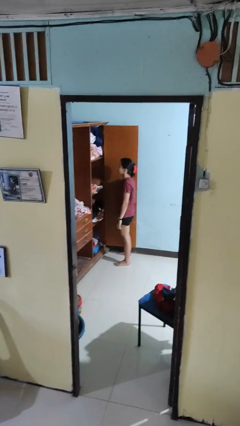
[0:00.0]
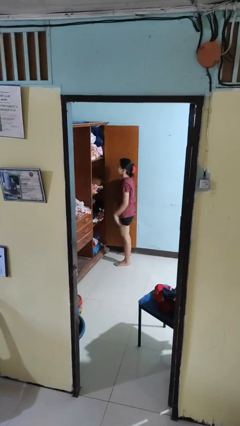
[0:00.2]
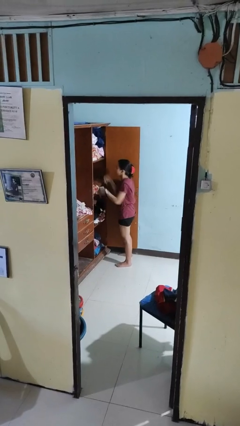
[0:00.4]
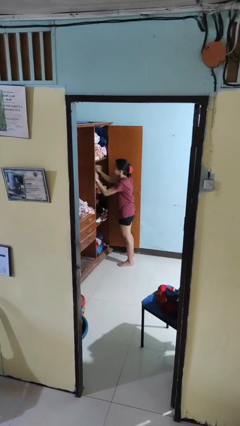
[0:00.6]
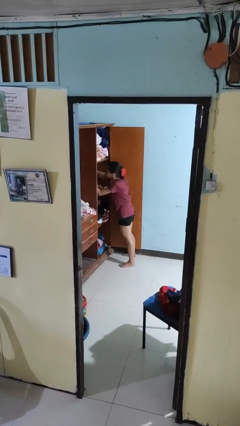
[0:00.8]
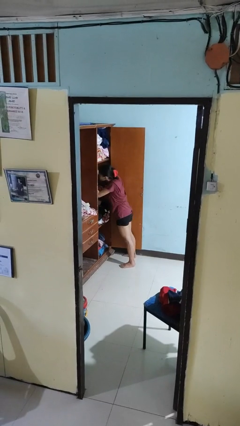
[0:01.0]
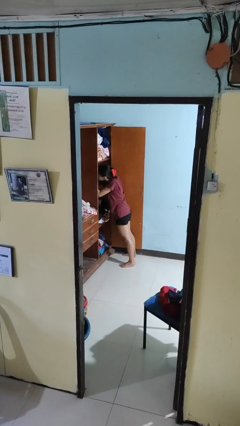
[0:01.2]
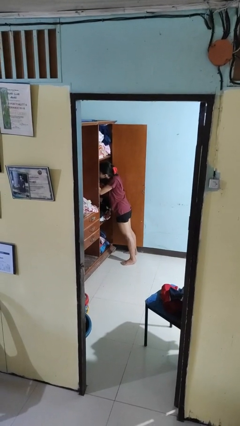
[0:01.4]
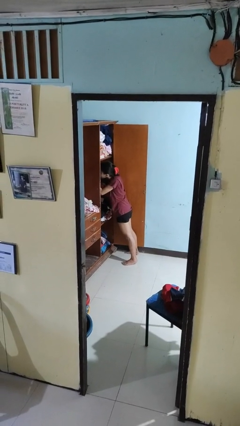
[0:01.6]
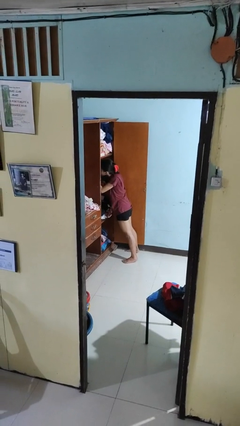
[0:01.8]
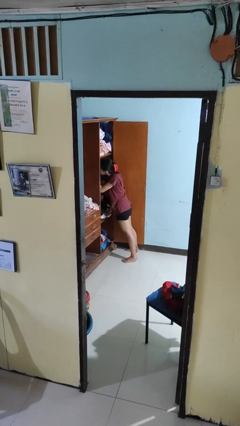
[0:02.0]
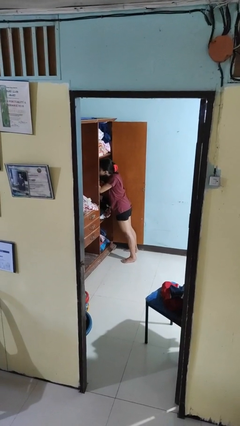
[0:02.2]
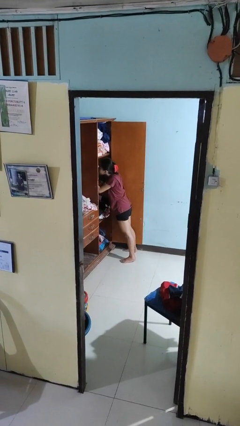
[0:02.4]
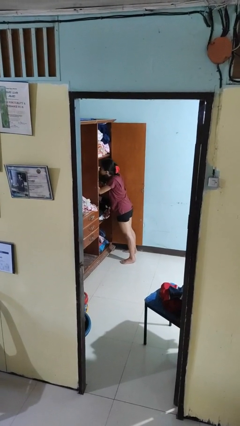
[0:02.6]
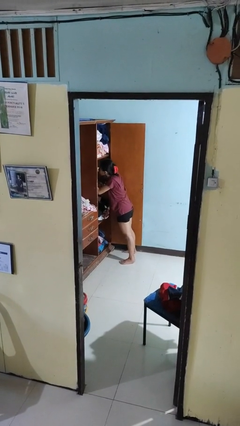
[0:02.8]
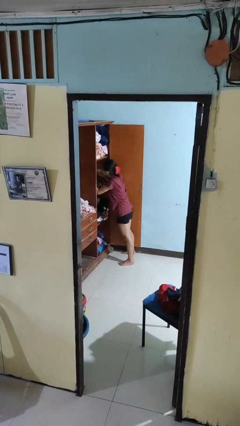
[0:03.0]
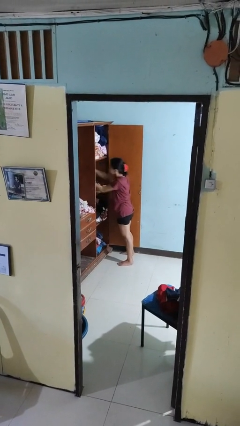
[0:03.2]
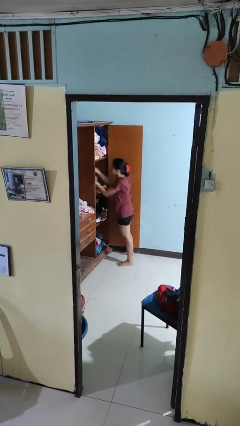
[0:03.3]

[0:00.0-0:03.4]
person searches in cabinet

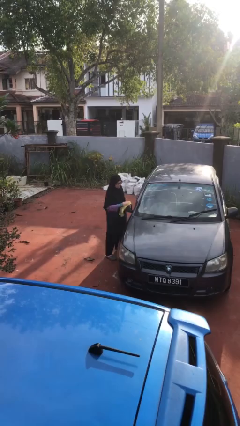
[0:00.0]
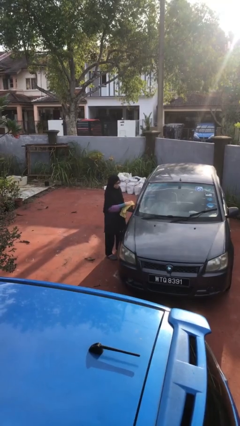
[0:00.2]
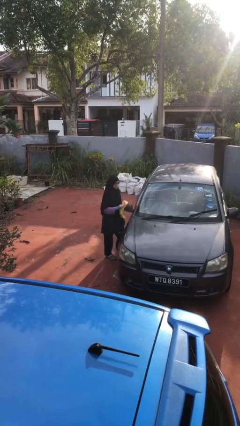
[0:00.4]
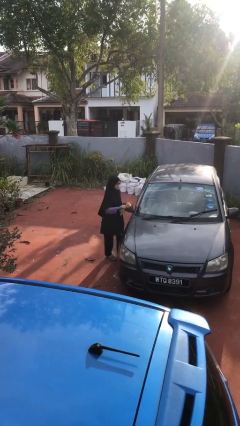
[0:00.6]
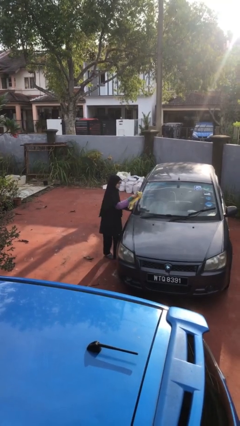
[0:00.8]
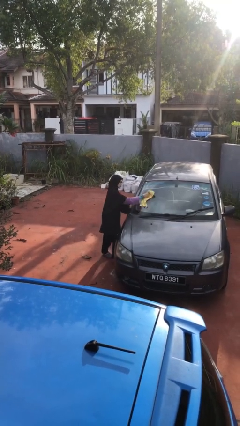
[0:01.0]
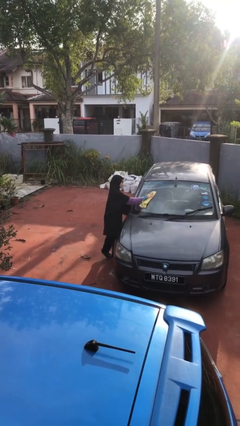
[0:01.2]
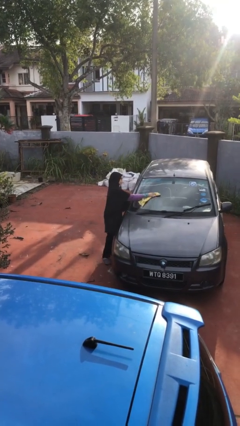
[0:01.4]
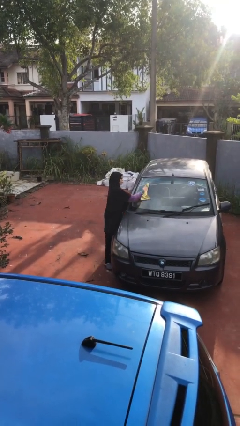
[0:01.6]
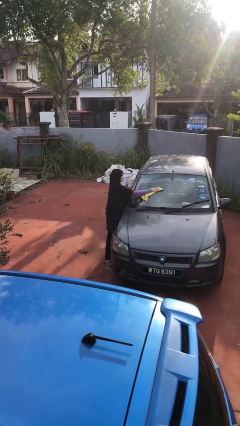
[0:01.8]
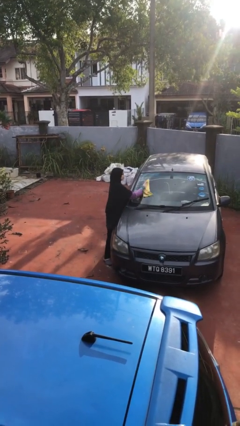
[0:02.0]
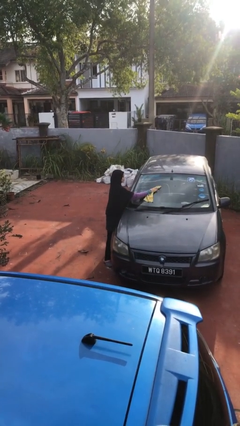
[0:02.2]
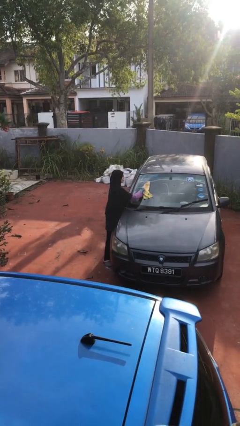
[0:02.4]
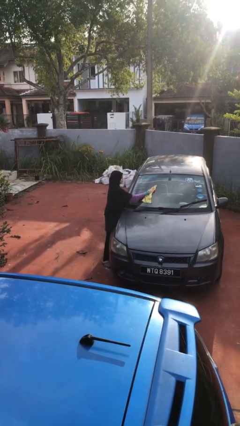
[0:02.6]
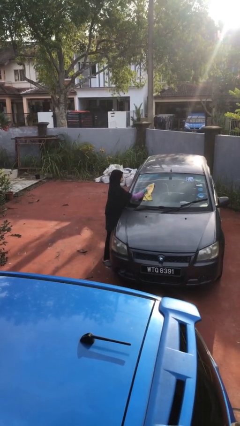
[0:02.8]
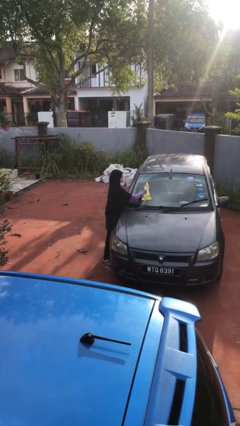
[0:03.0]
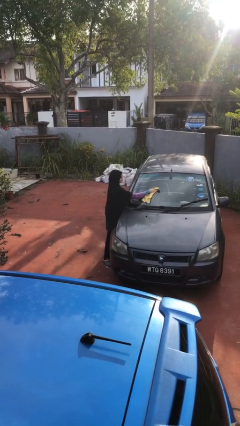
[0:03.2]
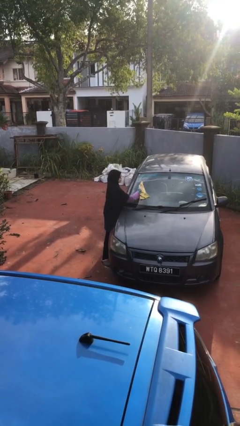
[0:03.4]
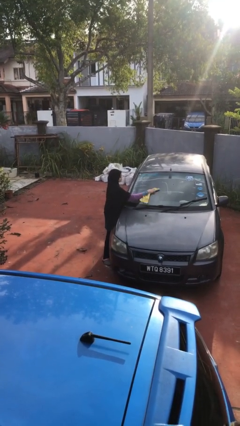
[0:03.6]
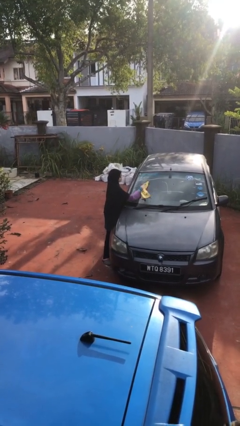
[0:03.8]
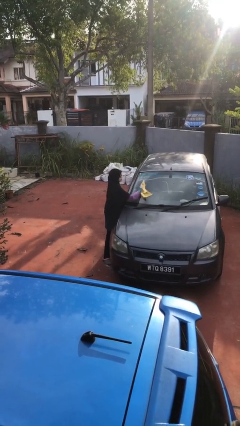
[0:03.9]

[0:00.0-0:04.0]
person polishes car with rag

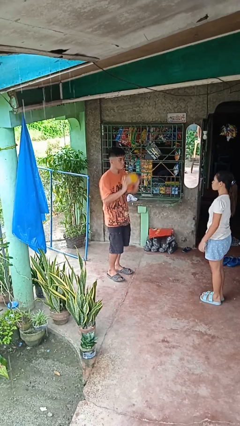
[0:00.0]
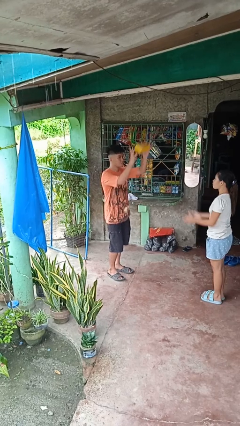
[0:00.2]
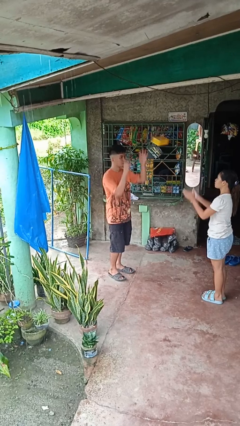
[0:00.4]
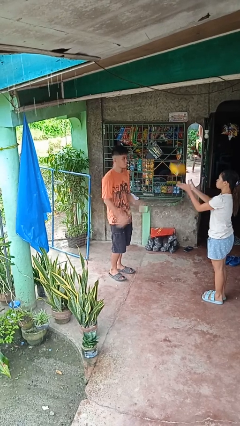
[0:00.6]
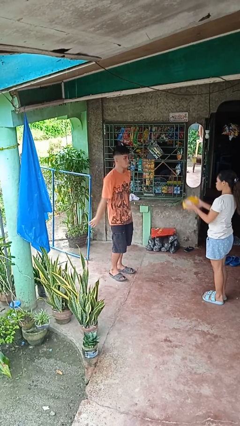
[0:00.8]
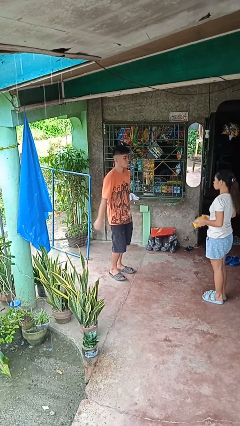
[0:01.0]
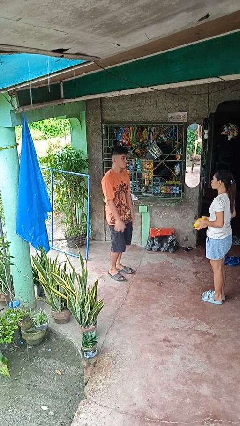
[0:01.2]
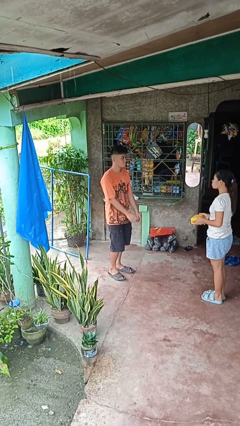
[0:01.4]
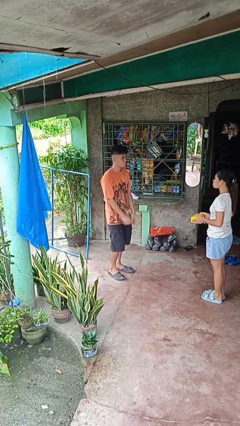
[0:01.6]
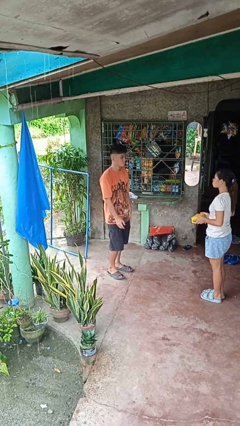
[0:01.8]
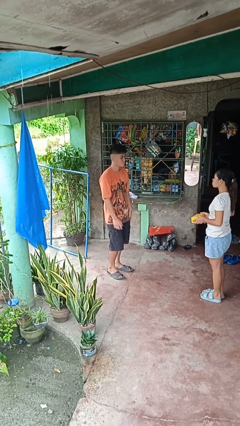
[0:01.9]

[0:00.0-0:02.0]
person throws object to person

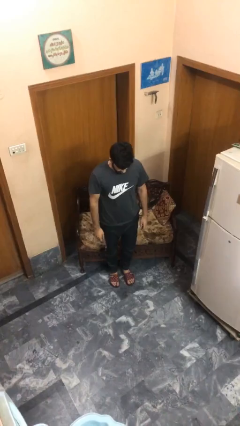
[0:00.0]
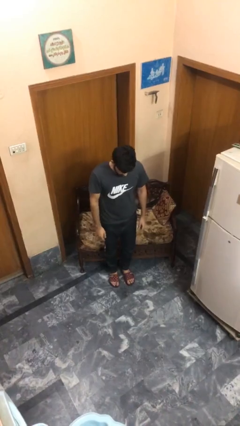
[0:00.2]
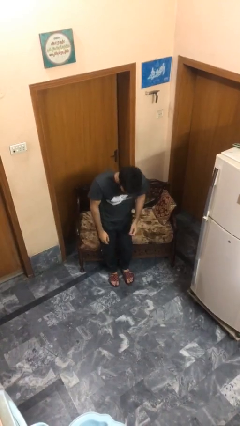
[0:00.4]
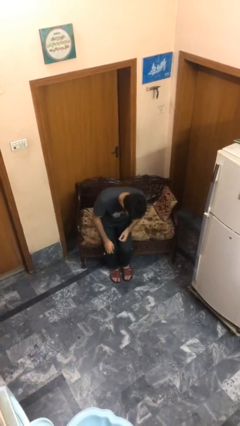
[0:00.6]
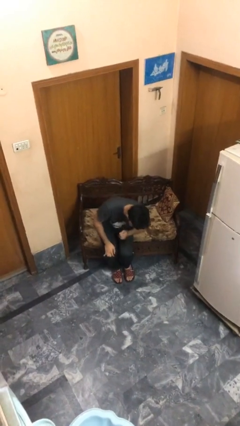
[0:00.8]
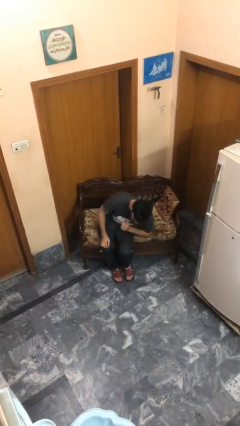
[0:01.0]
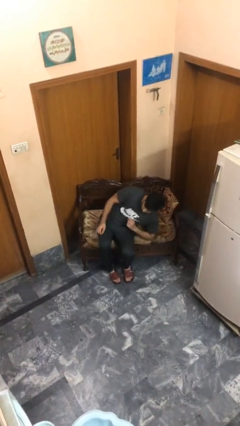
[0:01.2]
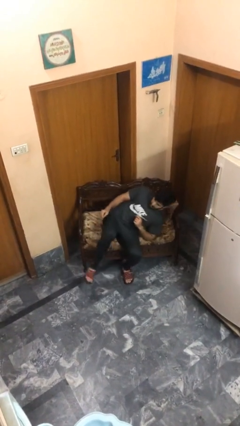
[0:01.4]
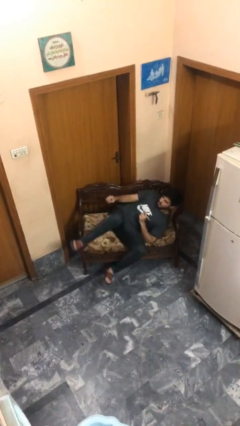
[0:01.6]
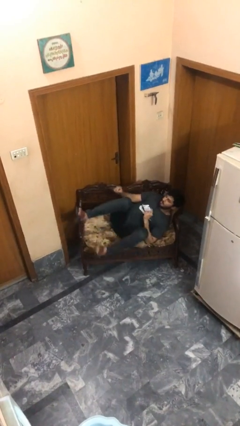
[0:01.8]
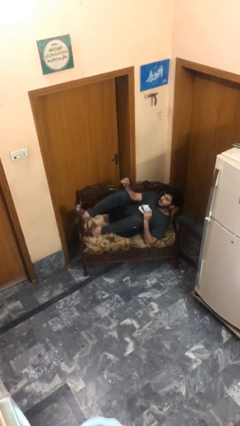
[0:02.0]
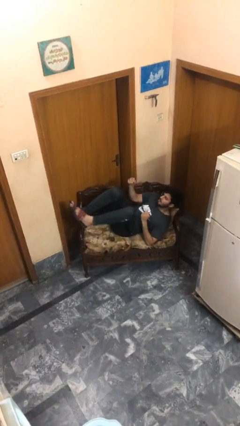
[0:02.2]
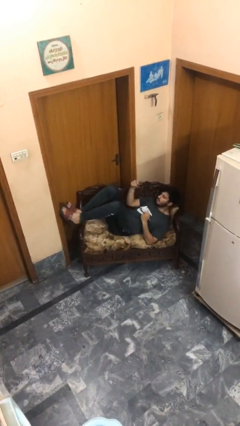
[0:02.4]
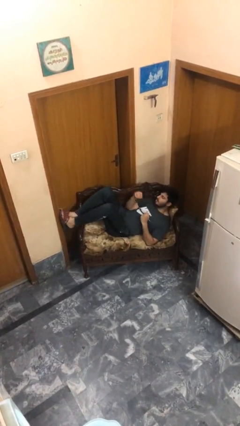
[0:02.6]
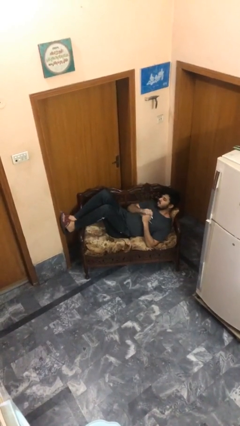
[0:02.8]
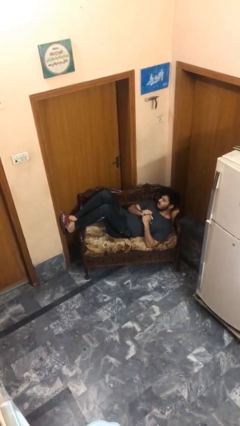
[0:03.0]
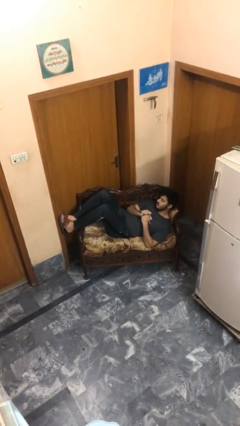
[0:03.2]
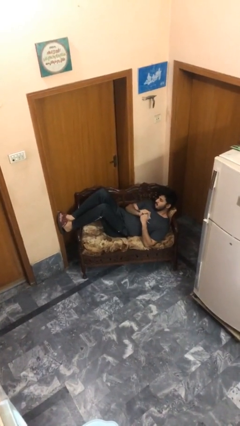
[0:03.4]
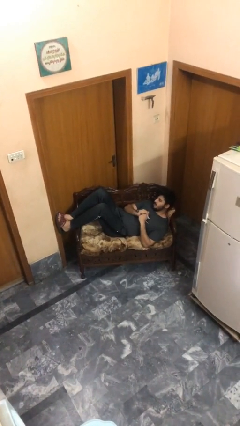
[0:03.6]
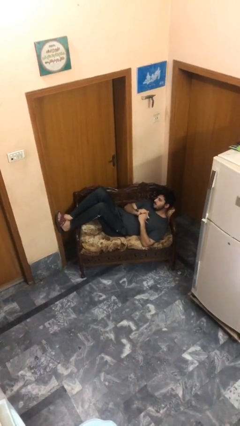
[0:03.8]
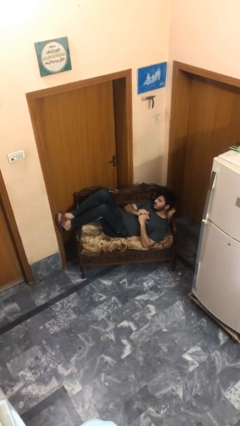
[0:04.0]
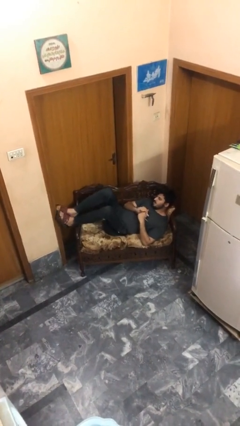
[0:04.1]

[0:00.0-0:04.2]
person lies down on couch

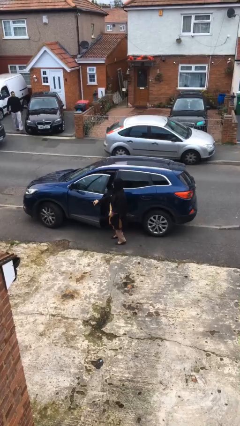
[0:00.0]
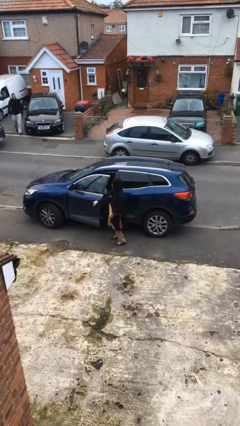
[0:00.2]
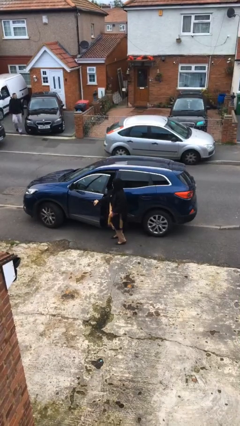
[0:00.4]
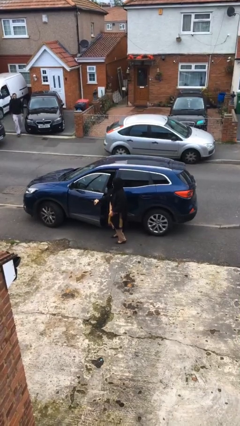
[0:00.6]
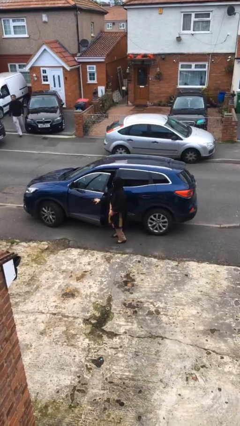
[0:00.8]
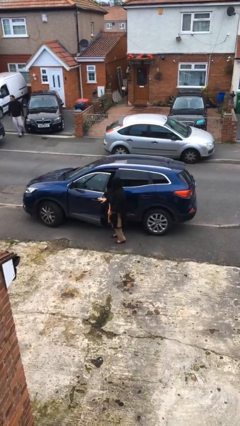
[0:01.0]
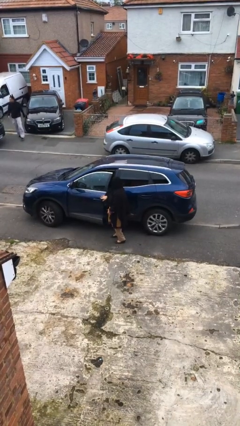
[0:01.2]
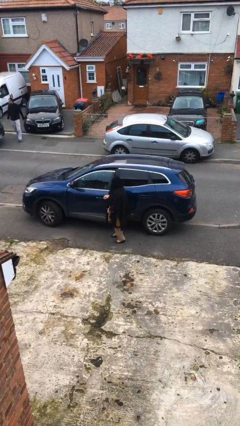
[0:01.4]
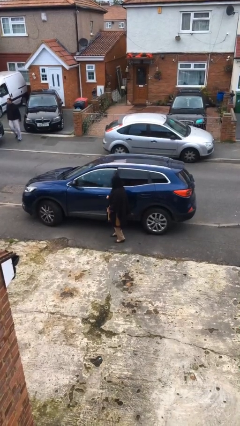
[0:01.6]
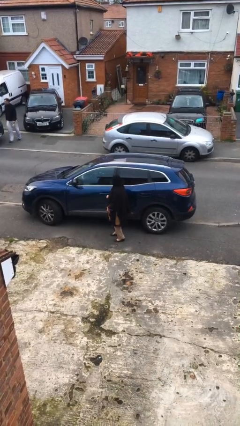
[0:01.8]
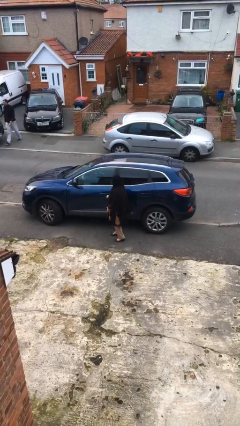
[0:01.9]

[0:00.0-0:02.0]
person closes car door

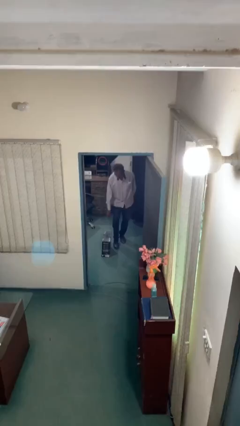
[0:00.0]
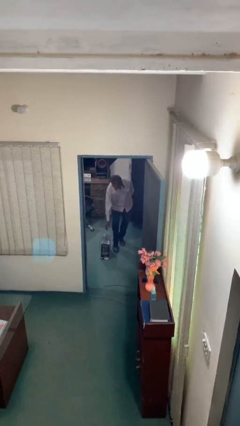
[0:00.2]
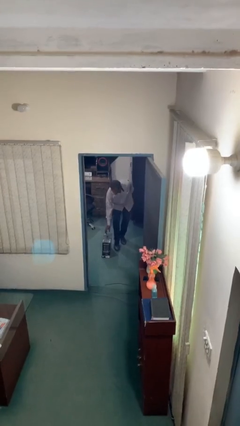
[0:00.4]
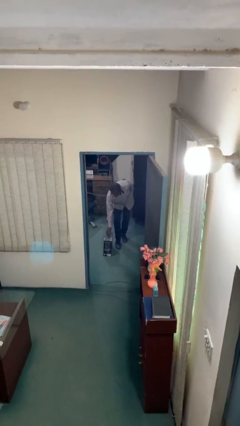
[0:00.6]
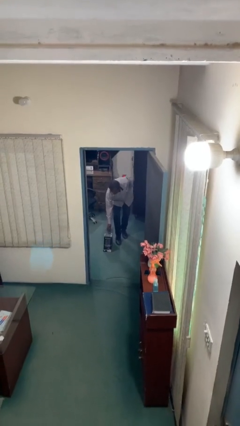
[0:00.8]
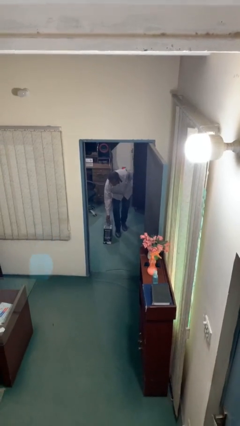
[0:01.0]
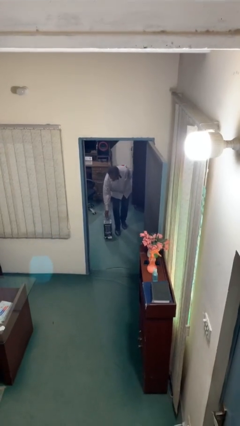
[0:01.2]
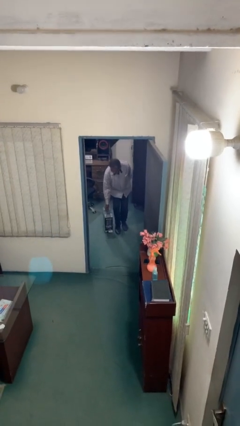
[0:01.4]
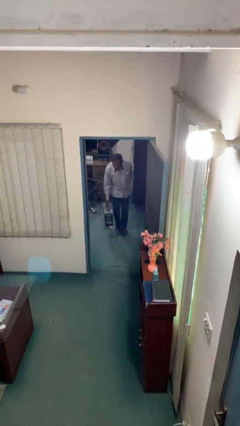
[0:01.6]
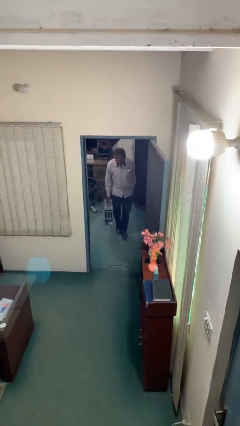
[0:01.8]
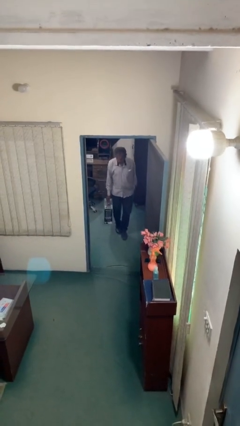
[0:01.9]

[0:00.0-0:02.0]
person picks up object from floor
